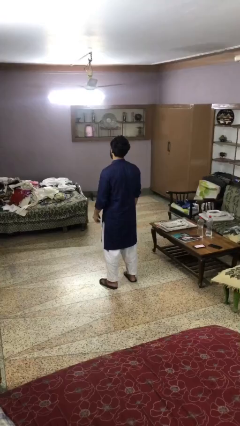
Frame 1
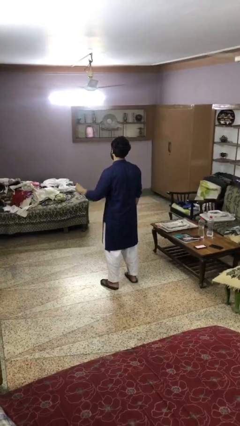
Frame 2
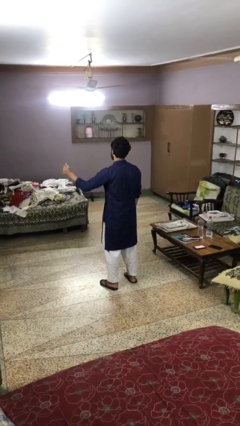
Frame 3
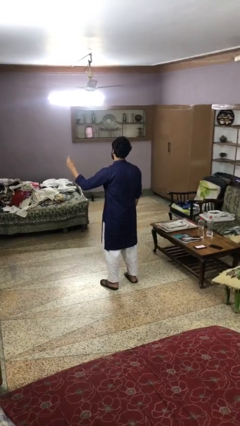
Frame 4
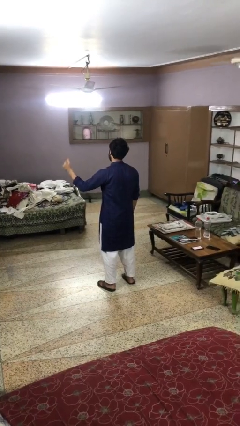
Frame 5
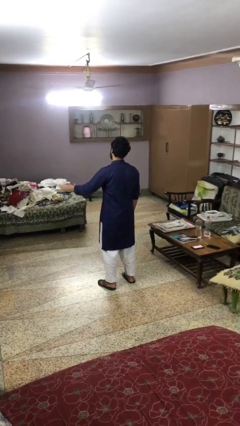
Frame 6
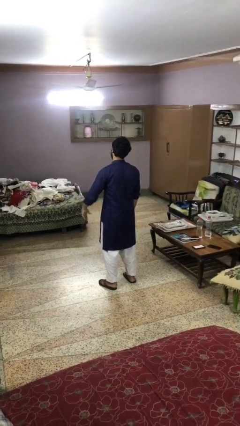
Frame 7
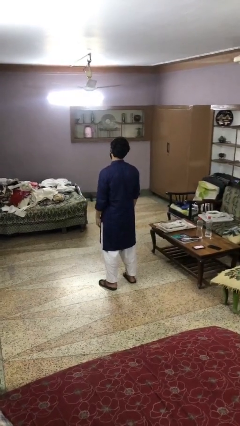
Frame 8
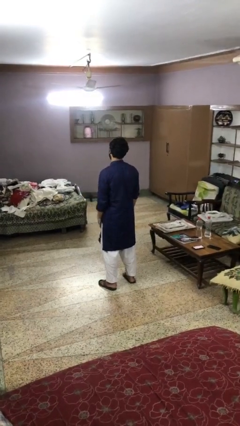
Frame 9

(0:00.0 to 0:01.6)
person snaps fingers

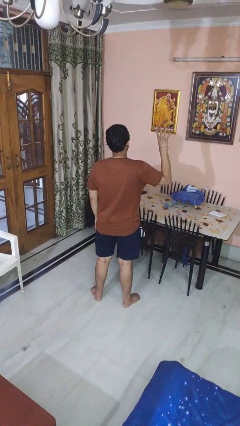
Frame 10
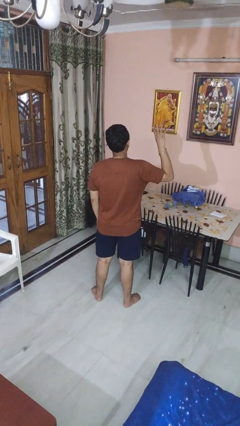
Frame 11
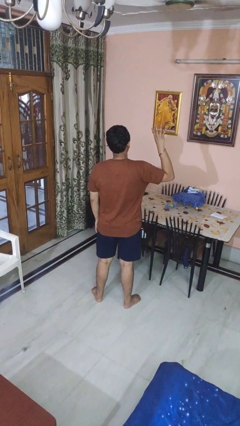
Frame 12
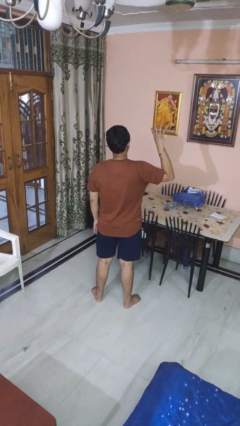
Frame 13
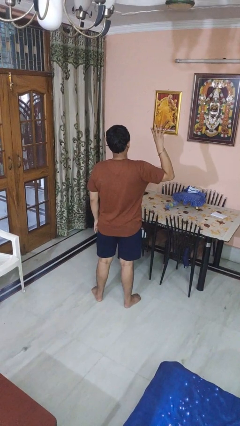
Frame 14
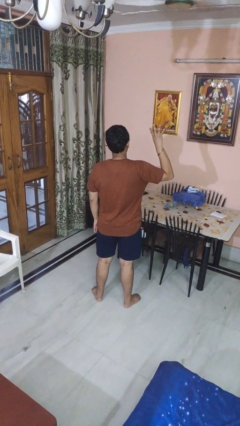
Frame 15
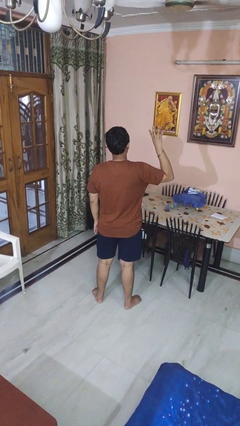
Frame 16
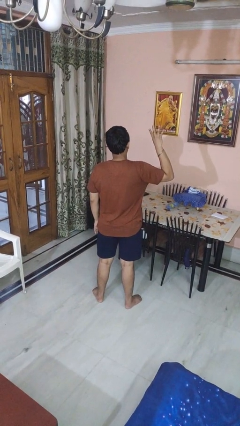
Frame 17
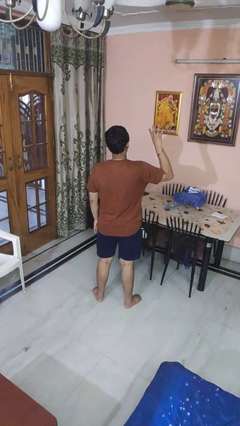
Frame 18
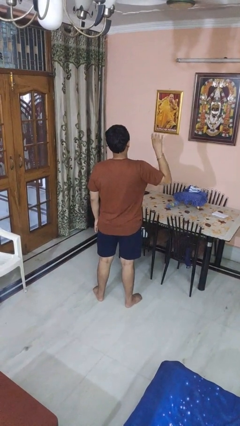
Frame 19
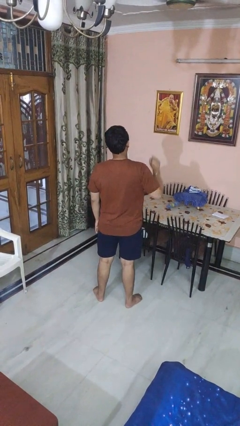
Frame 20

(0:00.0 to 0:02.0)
person gestures number four

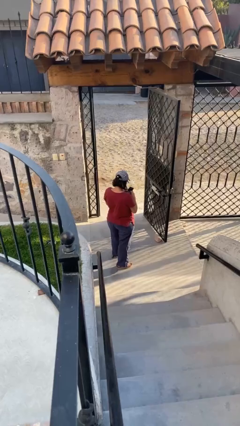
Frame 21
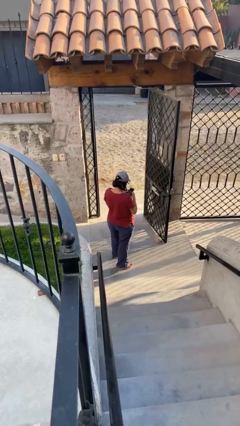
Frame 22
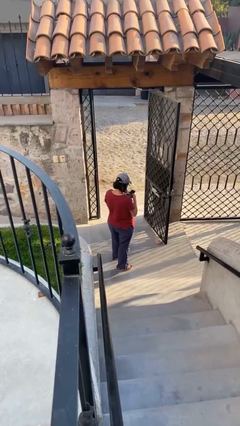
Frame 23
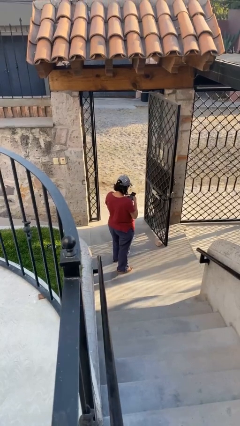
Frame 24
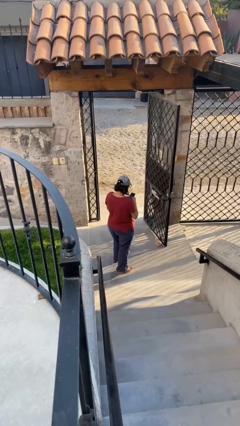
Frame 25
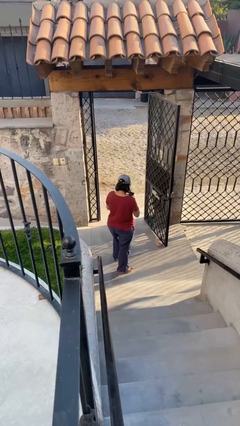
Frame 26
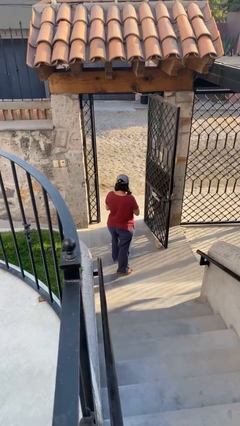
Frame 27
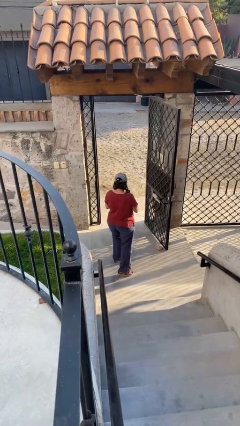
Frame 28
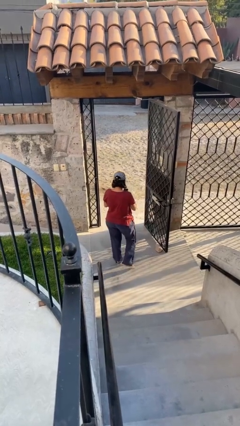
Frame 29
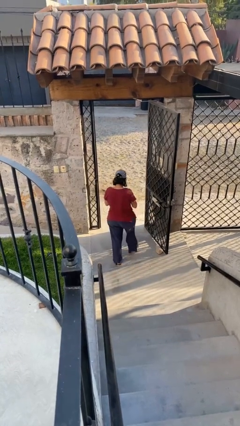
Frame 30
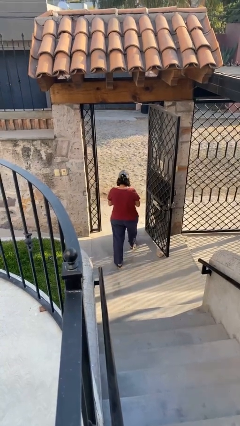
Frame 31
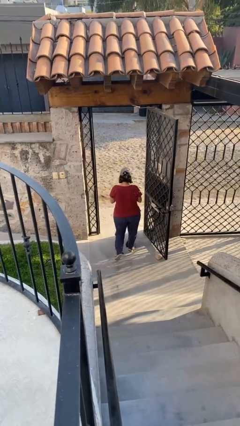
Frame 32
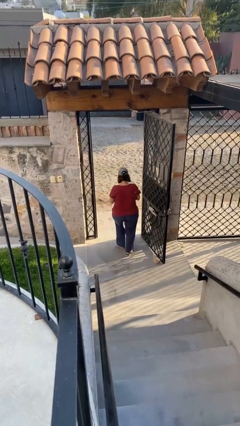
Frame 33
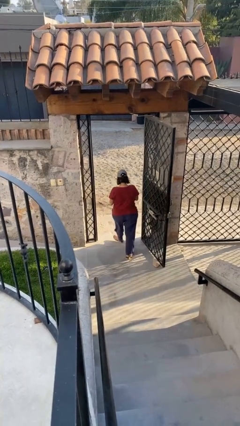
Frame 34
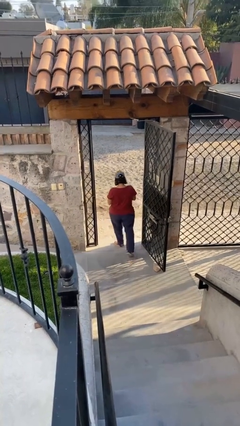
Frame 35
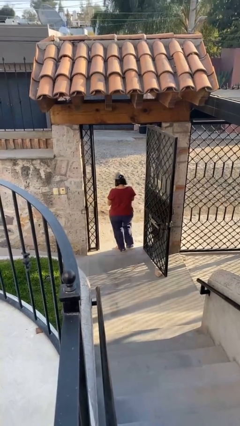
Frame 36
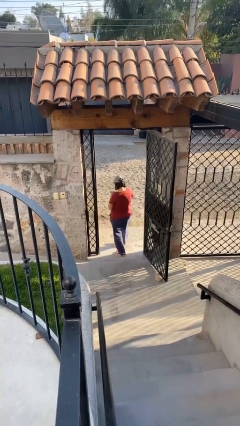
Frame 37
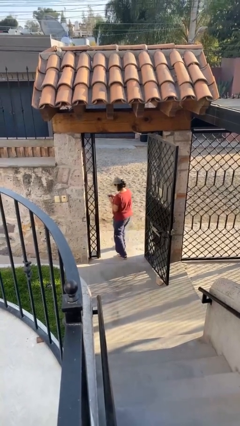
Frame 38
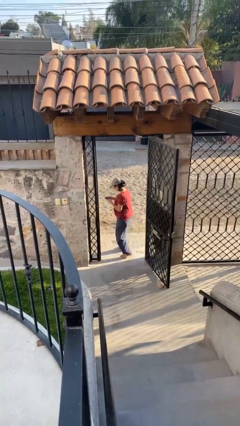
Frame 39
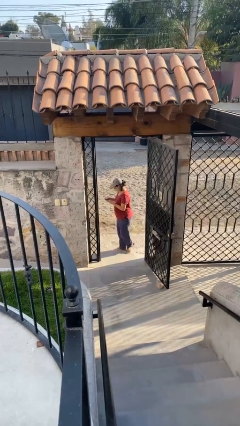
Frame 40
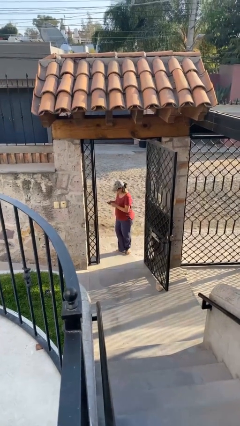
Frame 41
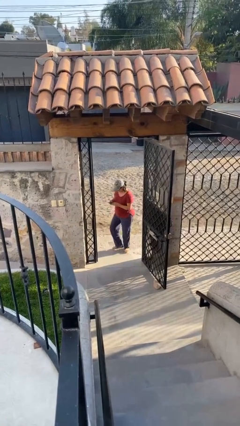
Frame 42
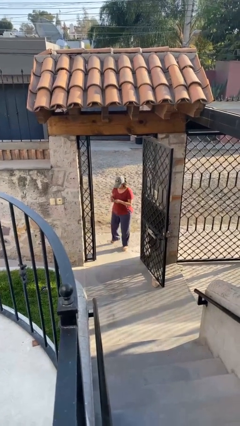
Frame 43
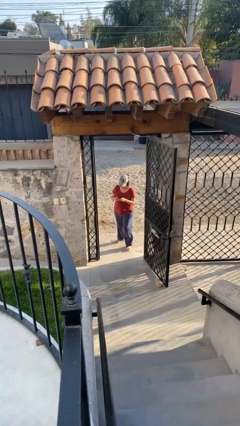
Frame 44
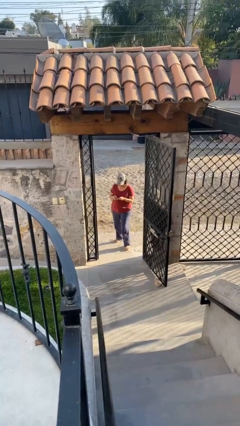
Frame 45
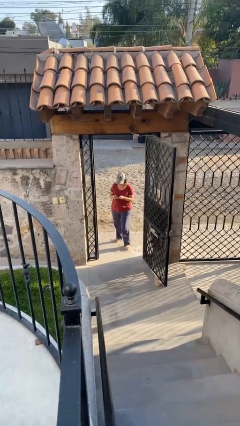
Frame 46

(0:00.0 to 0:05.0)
person exits scene through structure

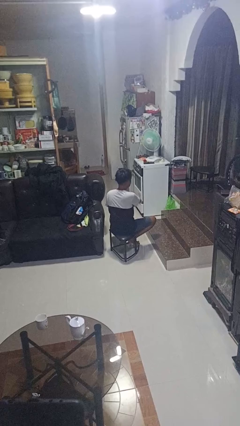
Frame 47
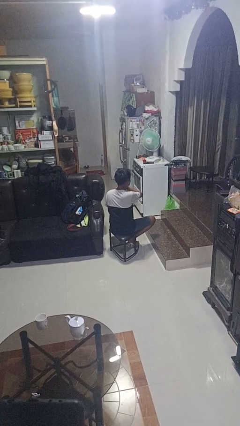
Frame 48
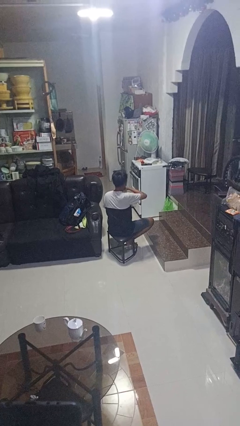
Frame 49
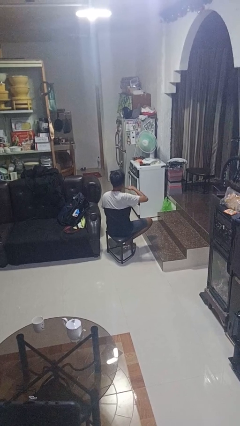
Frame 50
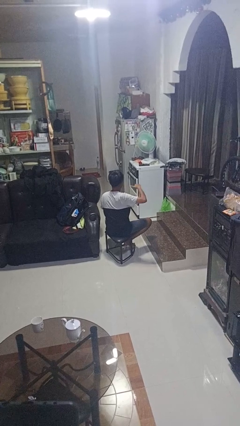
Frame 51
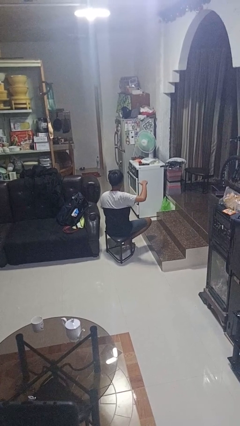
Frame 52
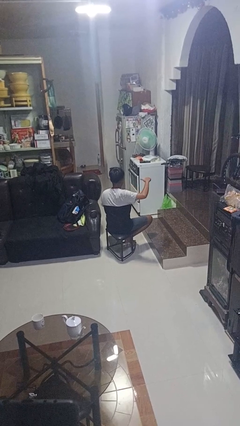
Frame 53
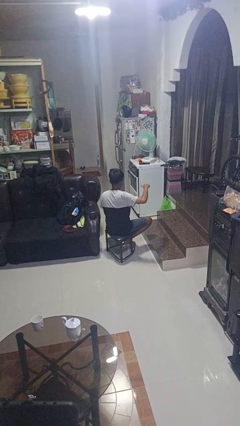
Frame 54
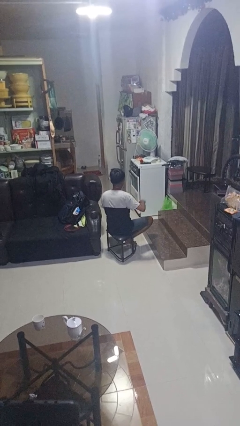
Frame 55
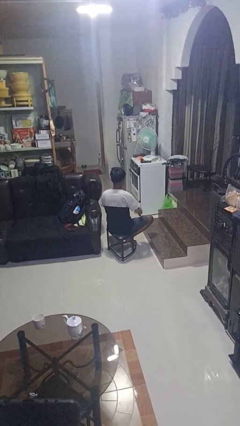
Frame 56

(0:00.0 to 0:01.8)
person gestures cut

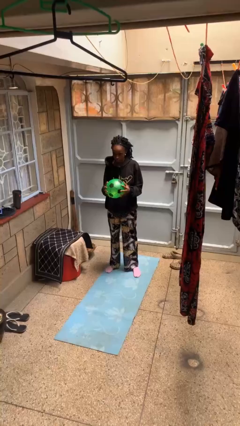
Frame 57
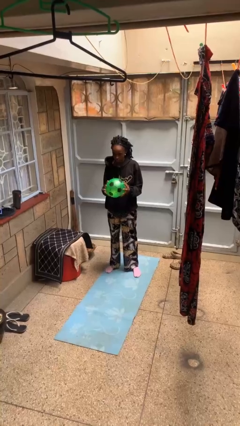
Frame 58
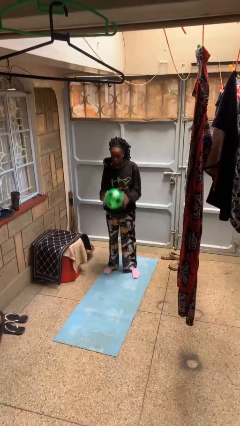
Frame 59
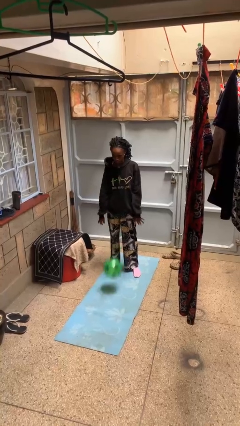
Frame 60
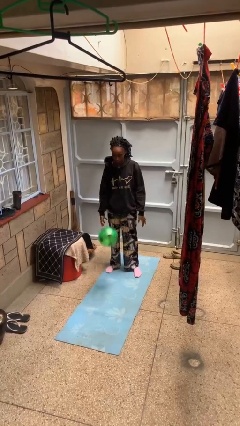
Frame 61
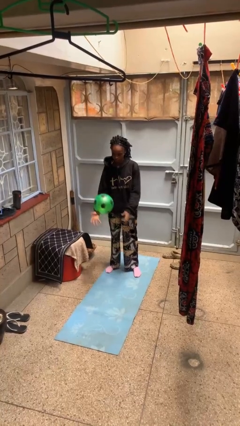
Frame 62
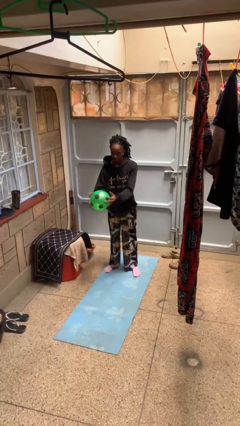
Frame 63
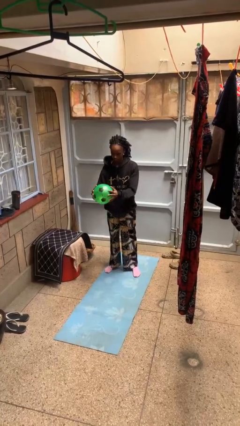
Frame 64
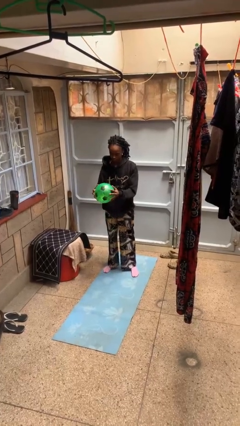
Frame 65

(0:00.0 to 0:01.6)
person bounces ball on floor

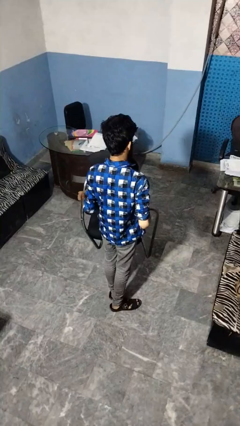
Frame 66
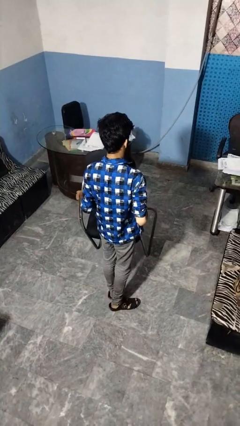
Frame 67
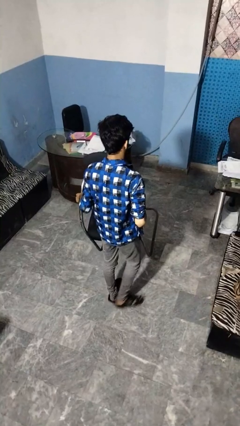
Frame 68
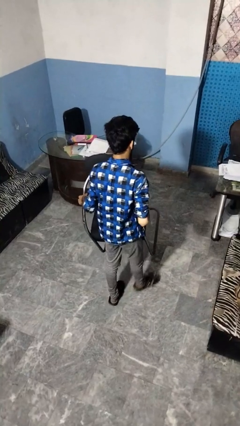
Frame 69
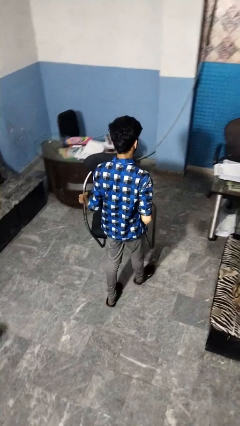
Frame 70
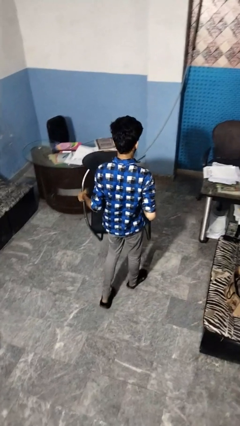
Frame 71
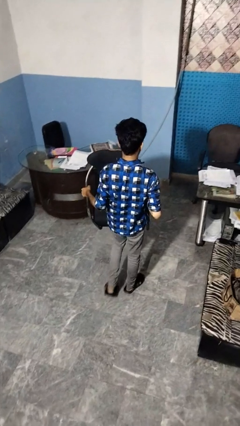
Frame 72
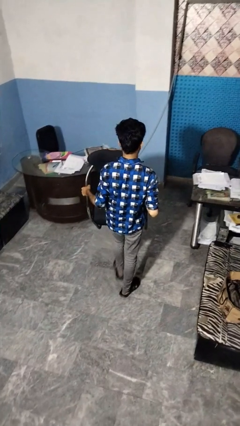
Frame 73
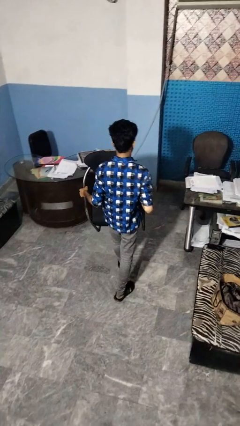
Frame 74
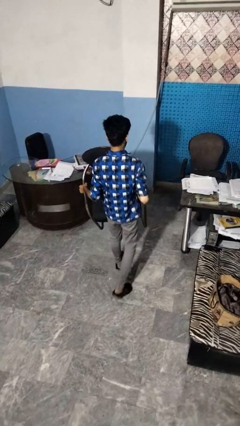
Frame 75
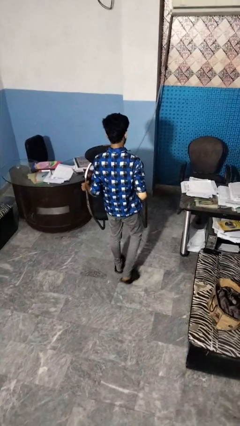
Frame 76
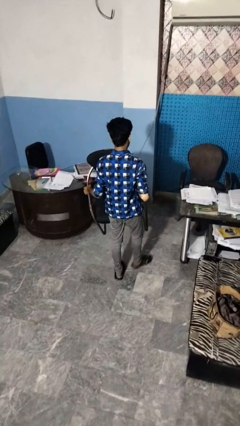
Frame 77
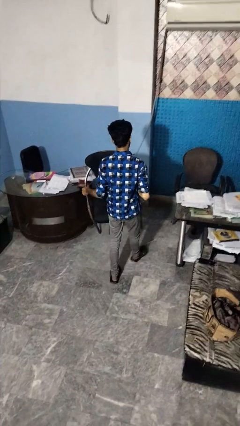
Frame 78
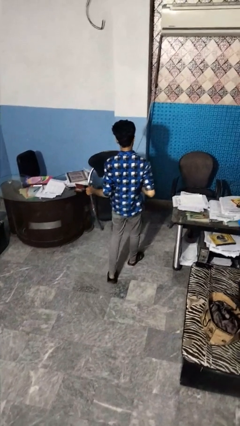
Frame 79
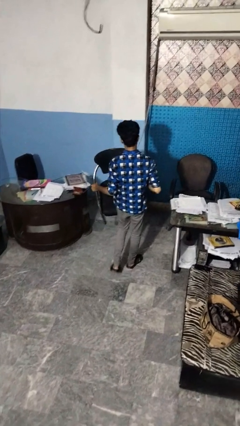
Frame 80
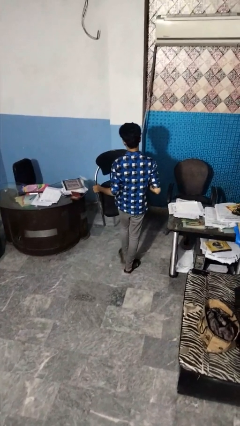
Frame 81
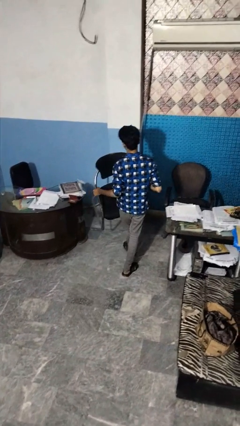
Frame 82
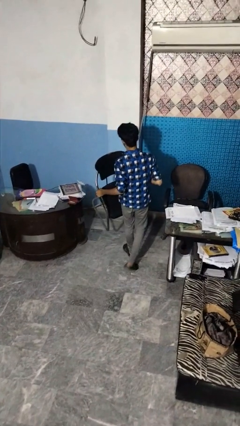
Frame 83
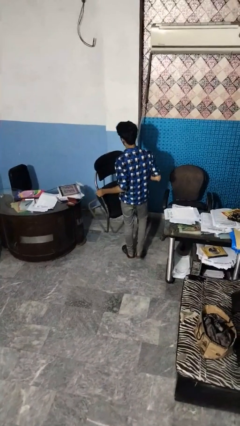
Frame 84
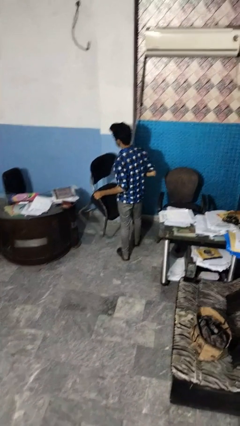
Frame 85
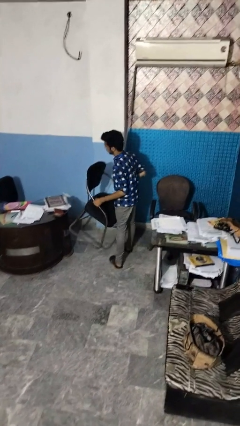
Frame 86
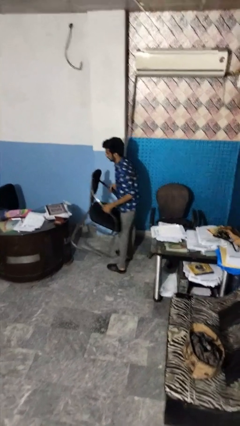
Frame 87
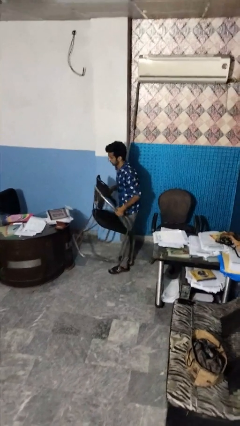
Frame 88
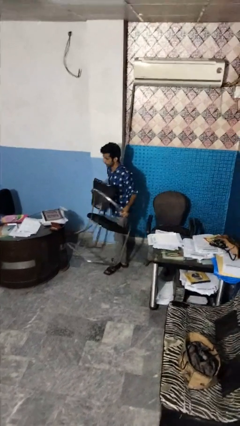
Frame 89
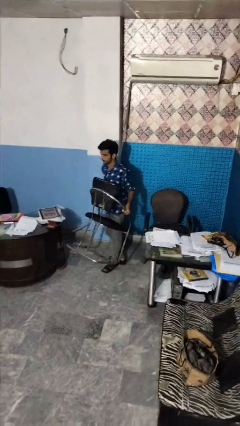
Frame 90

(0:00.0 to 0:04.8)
person carries furniture

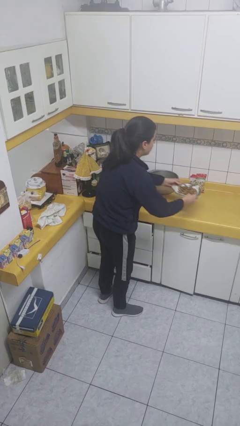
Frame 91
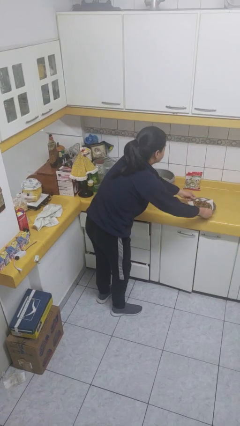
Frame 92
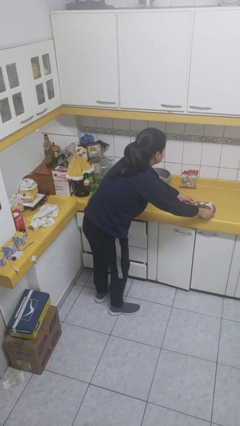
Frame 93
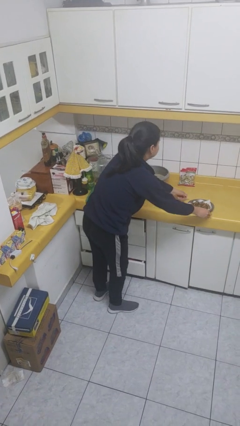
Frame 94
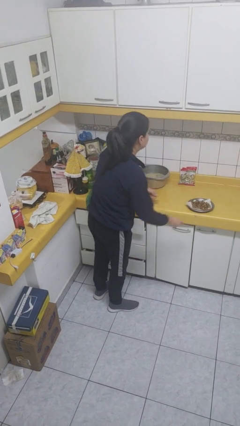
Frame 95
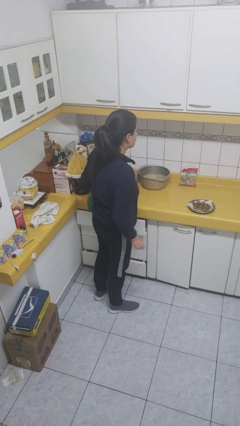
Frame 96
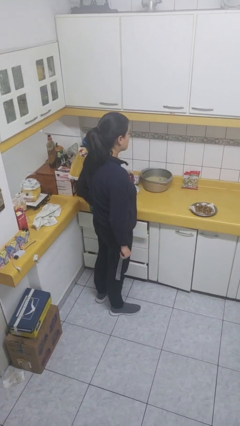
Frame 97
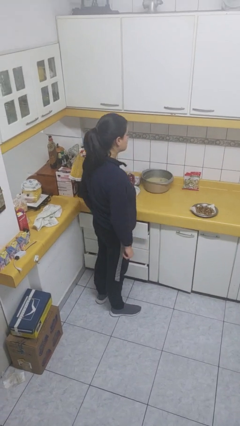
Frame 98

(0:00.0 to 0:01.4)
person puts down object on countertop
